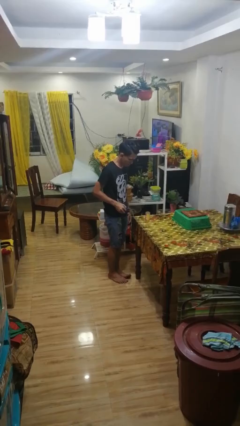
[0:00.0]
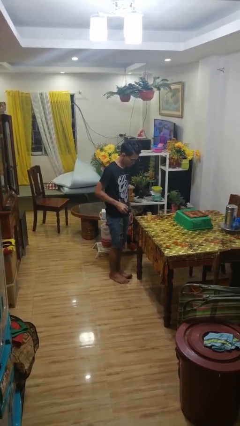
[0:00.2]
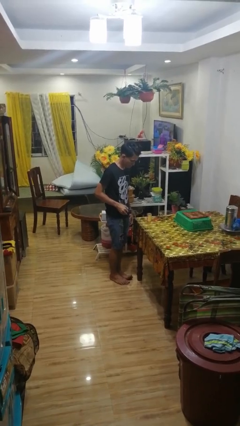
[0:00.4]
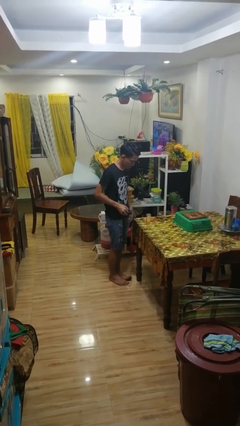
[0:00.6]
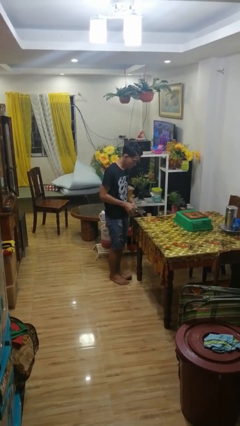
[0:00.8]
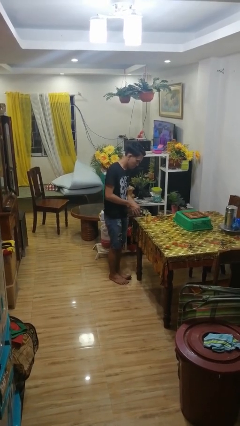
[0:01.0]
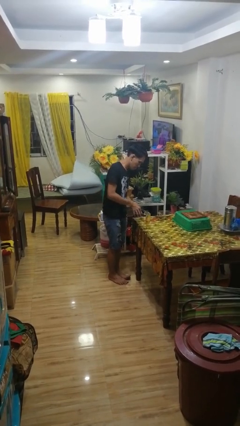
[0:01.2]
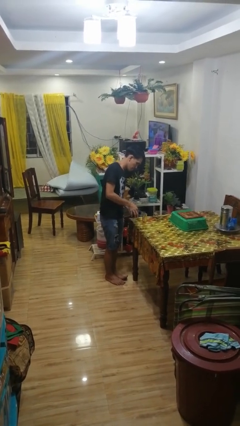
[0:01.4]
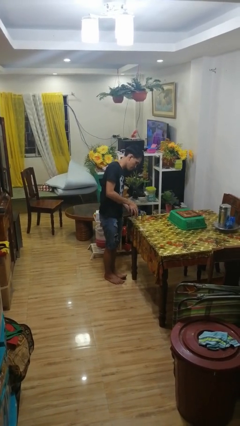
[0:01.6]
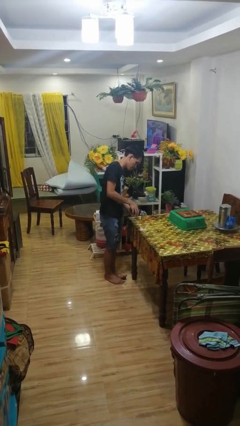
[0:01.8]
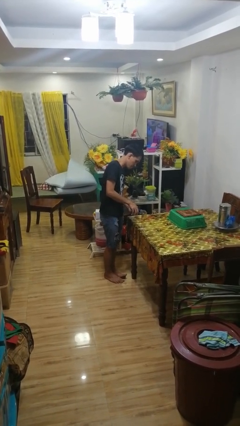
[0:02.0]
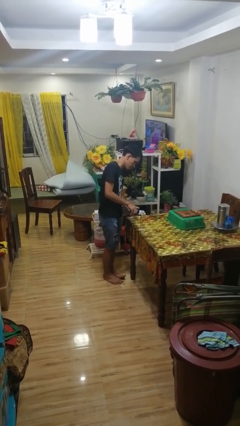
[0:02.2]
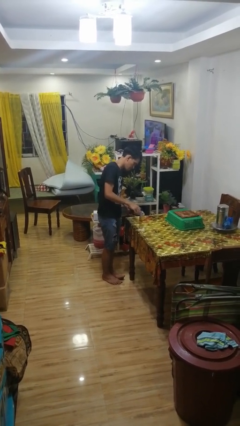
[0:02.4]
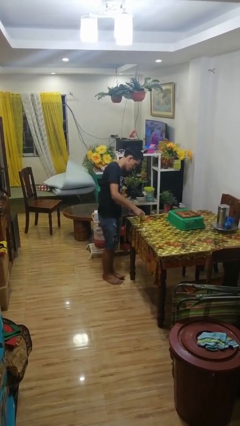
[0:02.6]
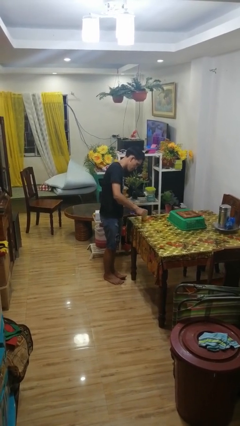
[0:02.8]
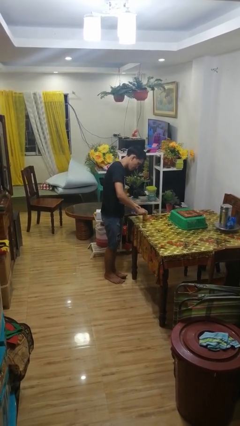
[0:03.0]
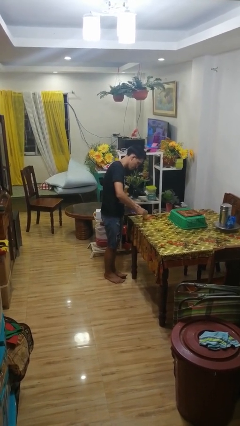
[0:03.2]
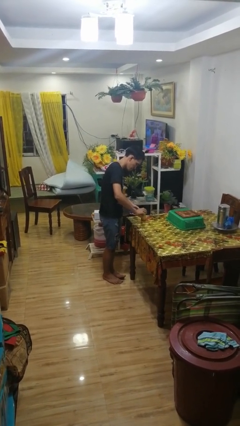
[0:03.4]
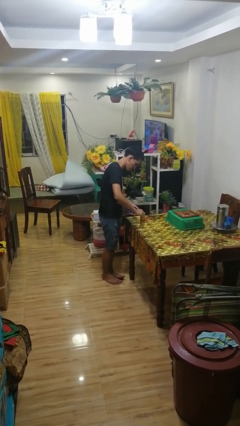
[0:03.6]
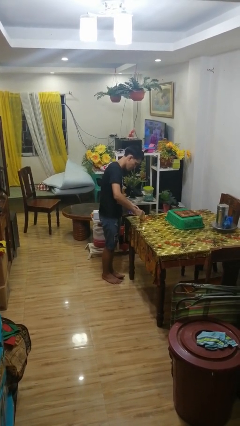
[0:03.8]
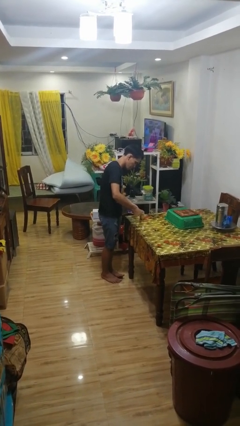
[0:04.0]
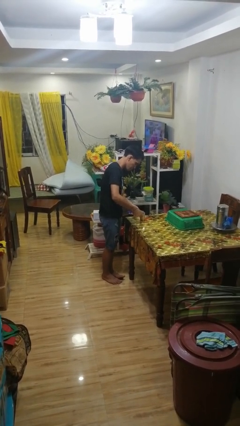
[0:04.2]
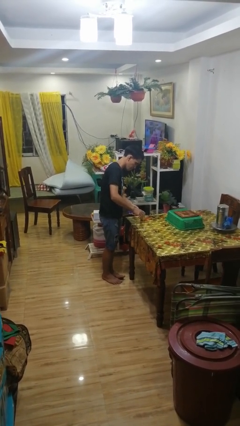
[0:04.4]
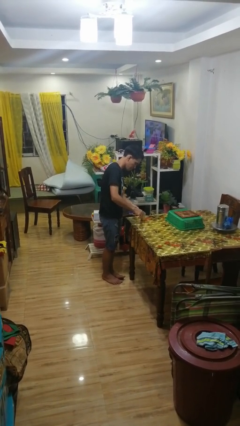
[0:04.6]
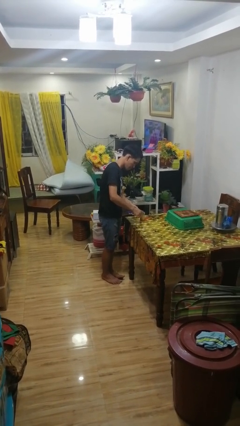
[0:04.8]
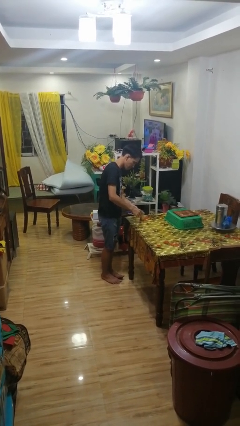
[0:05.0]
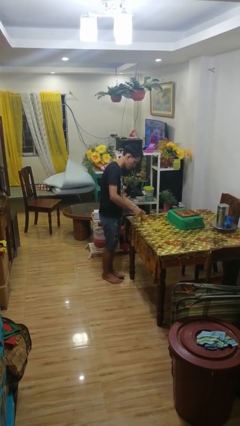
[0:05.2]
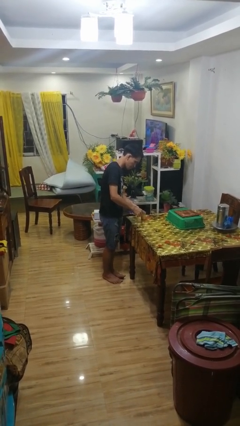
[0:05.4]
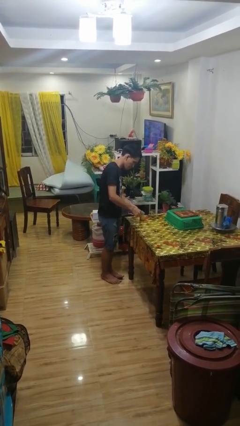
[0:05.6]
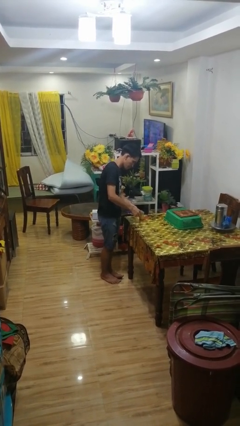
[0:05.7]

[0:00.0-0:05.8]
person opens can with can opener

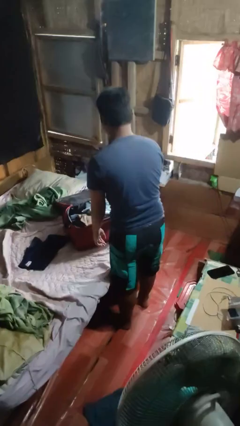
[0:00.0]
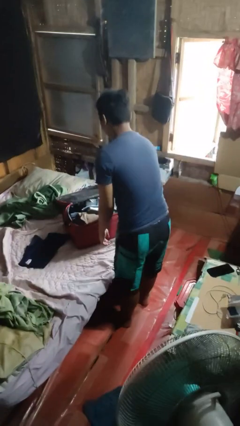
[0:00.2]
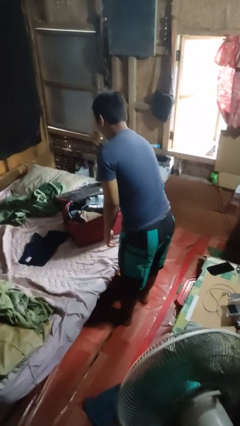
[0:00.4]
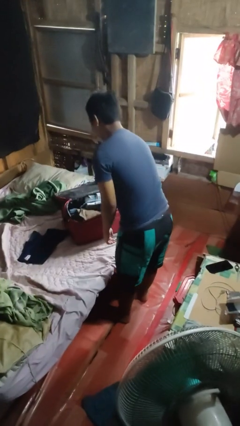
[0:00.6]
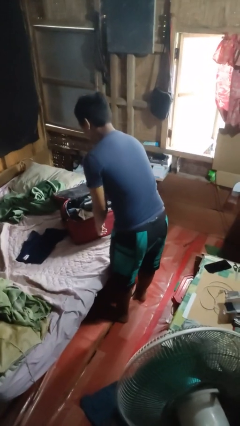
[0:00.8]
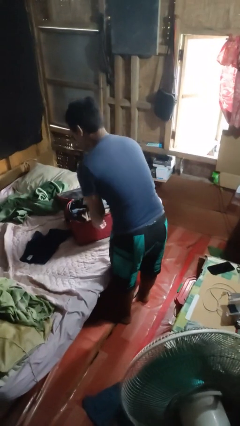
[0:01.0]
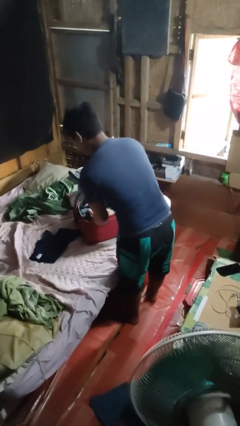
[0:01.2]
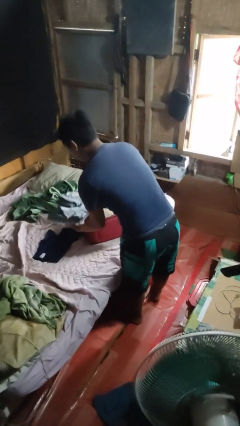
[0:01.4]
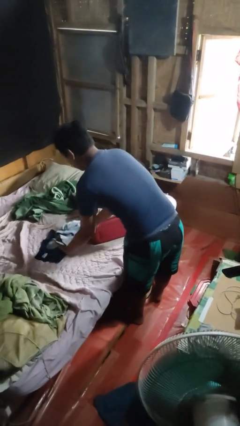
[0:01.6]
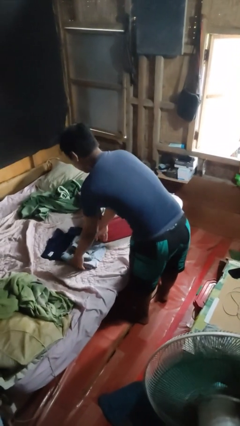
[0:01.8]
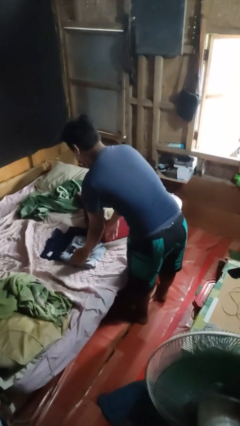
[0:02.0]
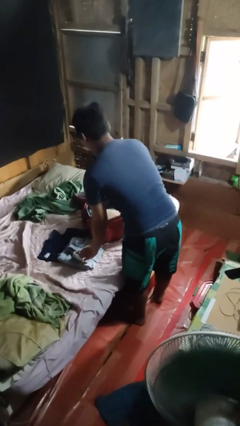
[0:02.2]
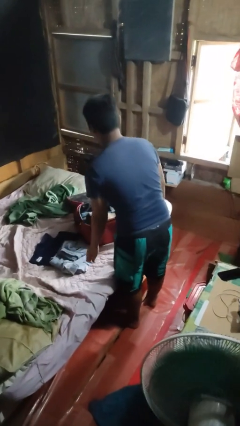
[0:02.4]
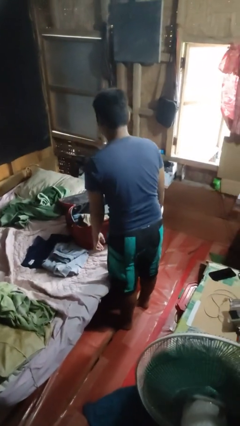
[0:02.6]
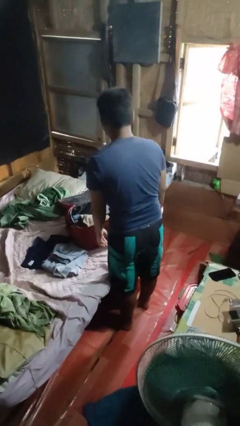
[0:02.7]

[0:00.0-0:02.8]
person unloads clothes from suitcase

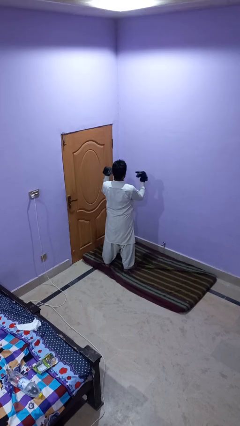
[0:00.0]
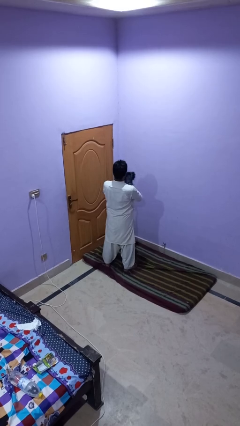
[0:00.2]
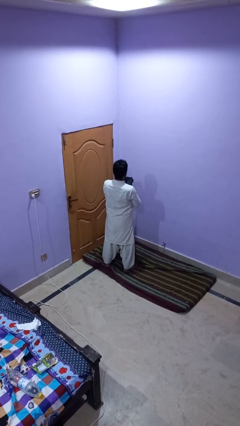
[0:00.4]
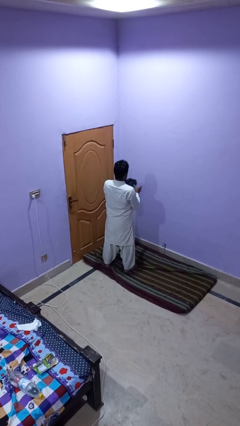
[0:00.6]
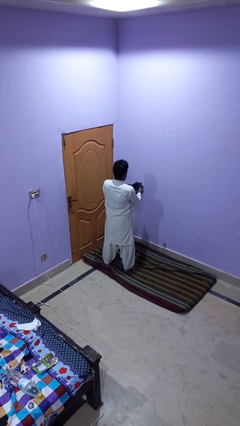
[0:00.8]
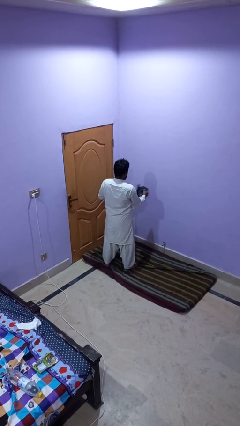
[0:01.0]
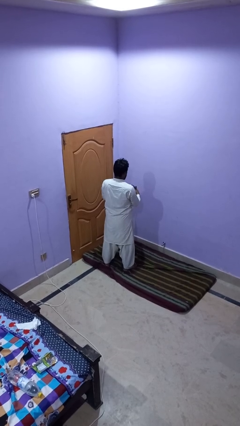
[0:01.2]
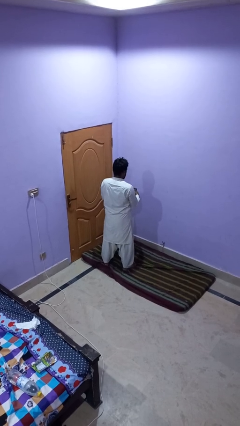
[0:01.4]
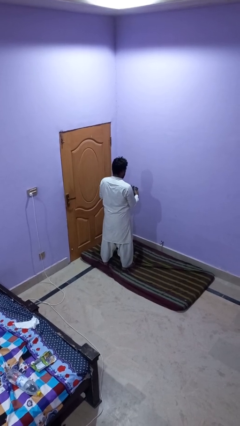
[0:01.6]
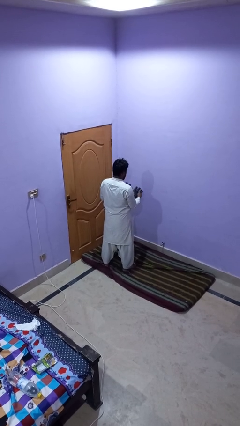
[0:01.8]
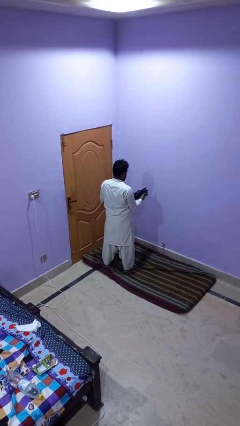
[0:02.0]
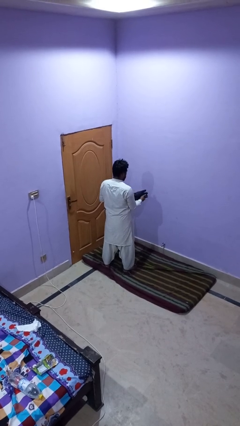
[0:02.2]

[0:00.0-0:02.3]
person takes off gloves

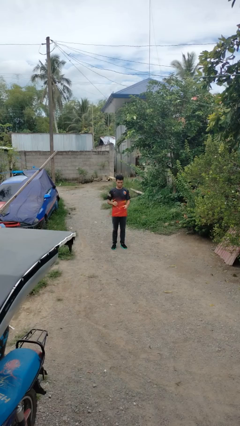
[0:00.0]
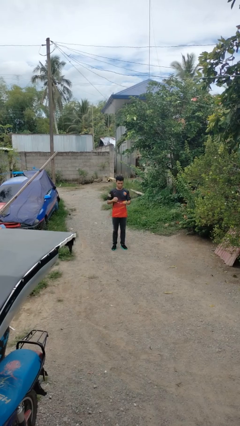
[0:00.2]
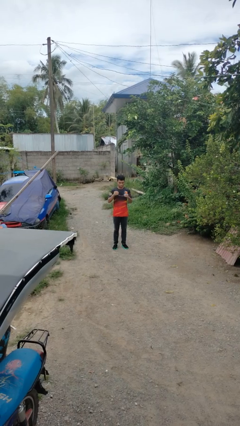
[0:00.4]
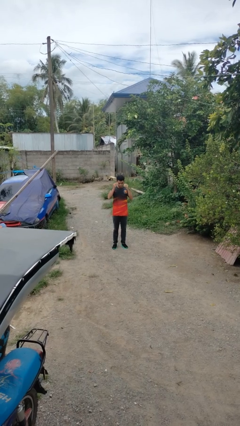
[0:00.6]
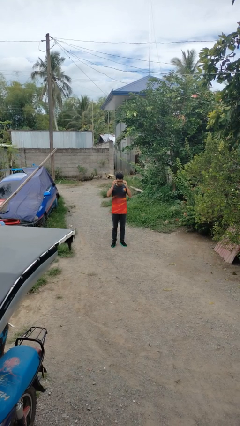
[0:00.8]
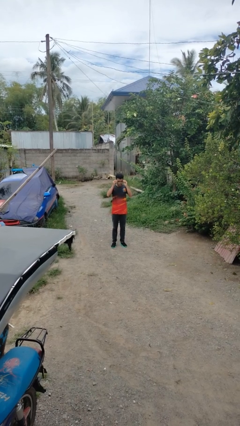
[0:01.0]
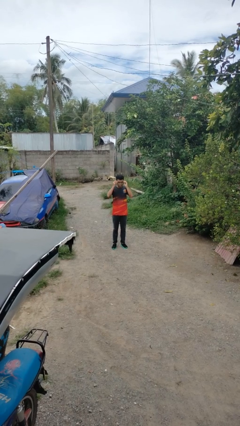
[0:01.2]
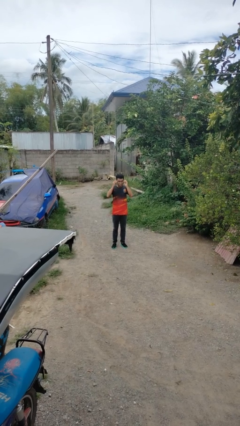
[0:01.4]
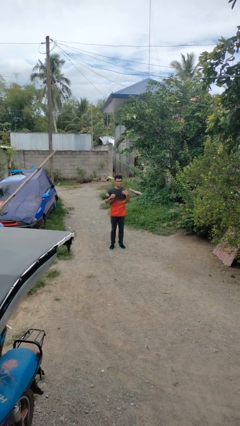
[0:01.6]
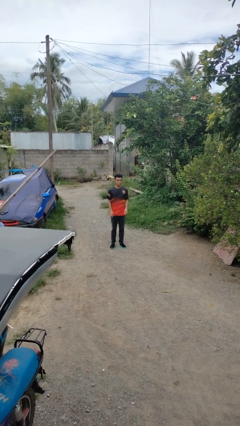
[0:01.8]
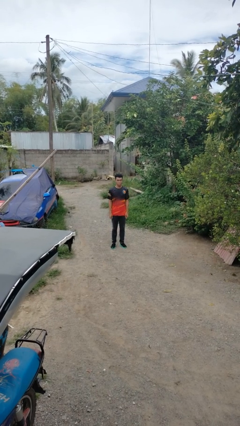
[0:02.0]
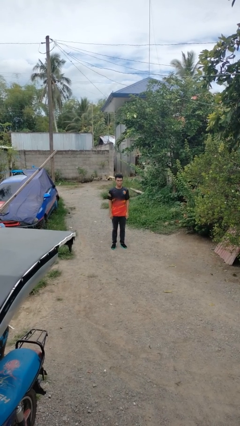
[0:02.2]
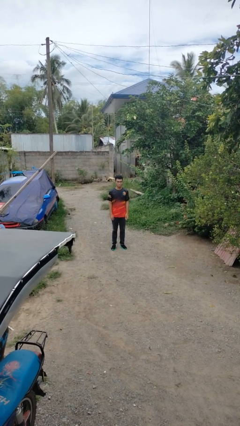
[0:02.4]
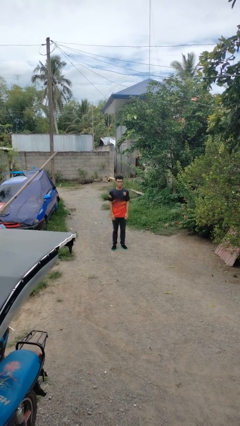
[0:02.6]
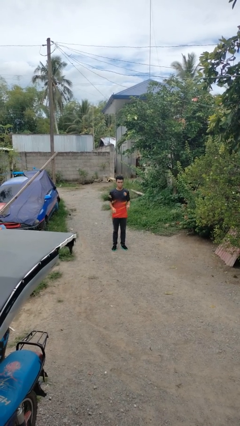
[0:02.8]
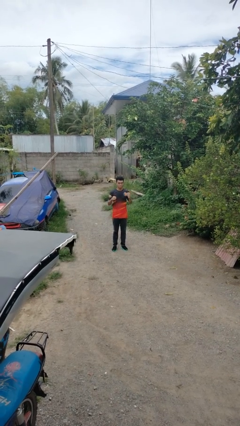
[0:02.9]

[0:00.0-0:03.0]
person puts on glasses

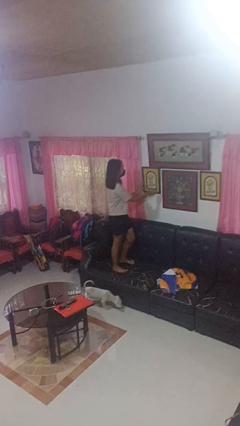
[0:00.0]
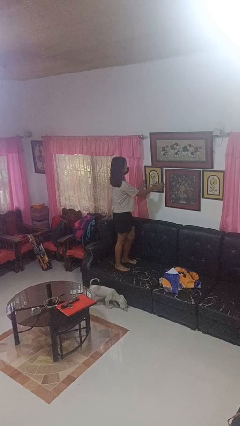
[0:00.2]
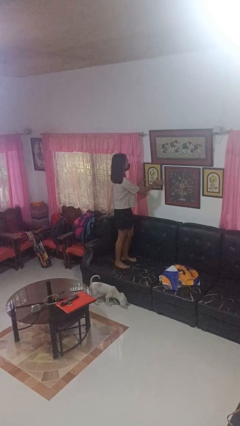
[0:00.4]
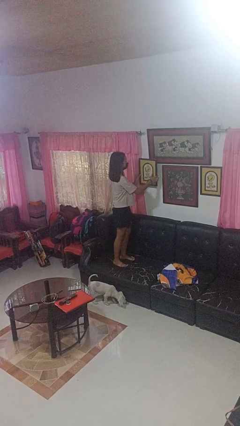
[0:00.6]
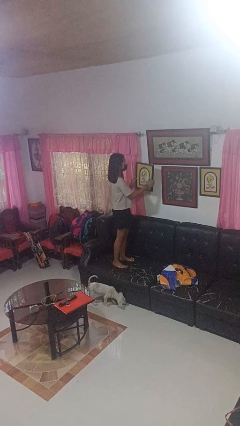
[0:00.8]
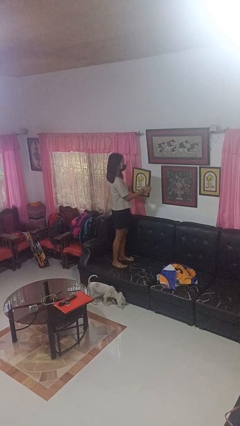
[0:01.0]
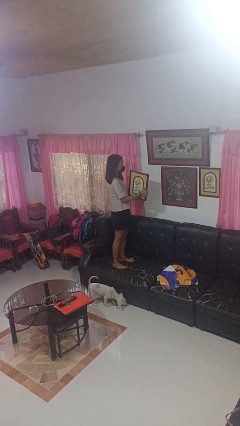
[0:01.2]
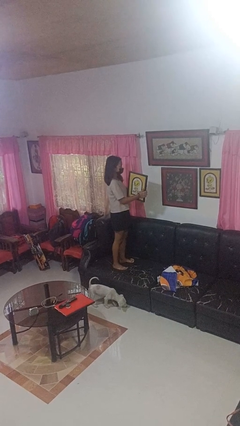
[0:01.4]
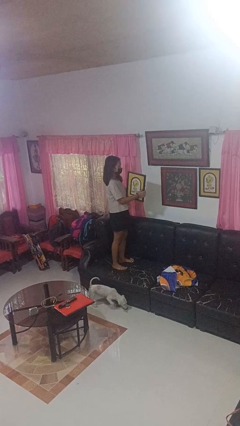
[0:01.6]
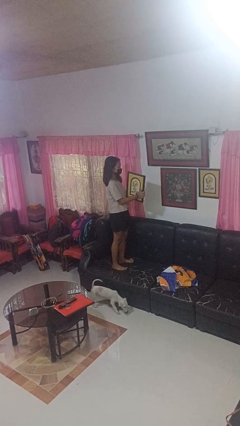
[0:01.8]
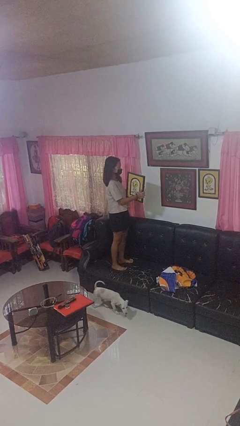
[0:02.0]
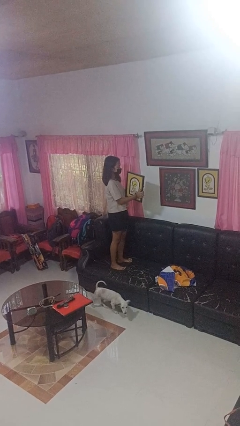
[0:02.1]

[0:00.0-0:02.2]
person takes down picture frame

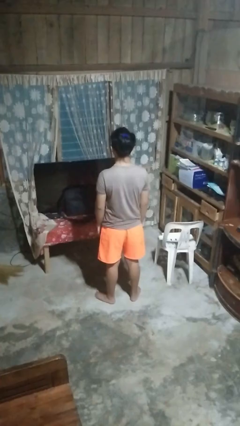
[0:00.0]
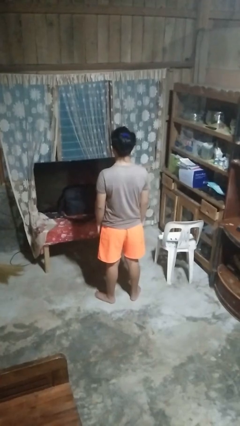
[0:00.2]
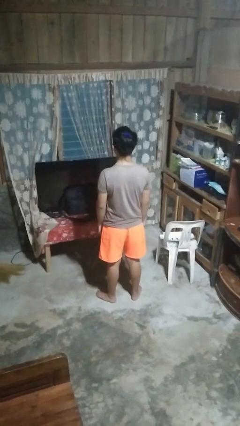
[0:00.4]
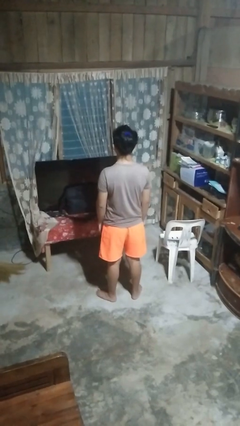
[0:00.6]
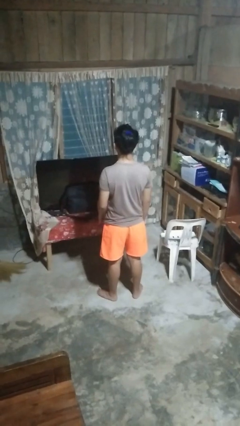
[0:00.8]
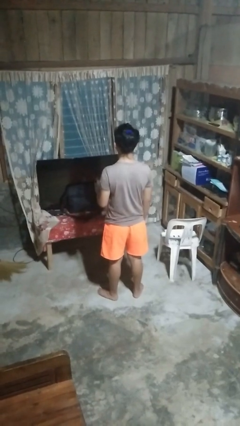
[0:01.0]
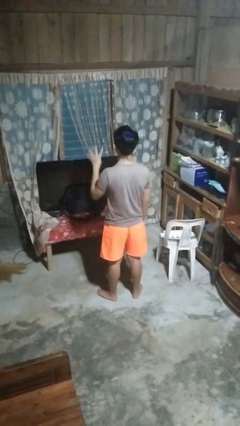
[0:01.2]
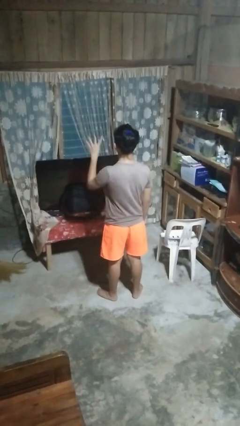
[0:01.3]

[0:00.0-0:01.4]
person gestures number four

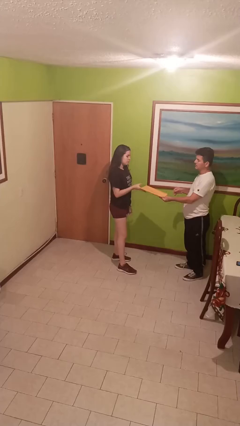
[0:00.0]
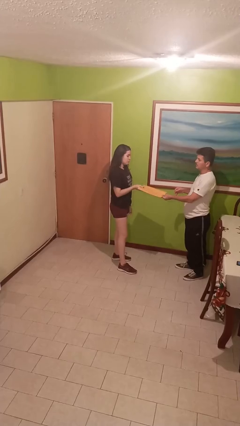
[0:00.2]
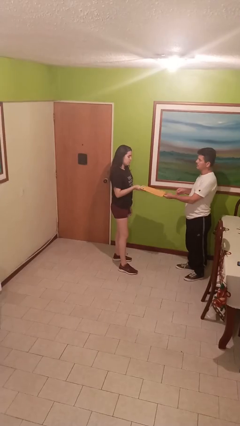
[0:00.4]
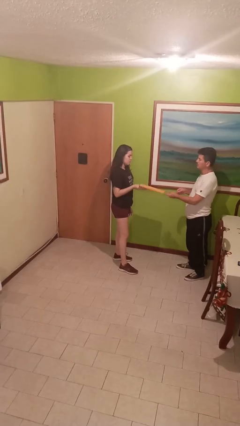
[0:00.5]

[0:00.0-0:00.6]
person transfers object to person
